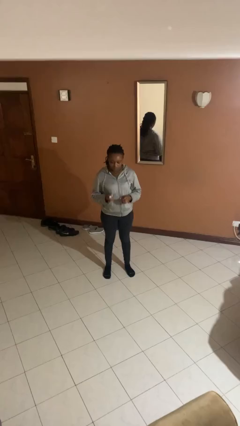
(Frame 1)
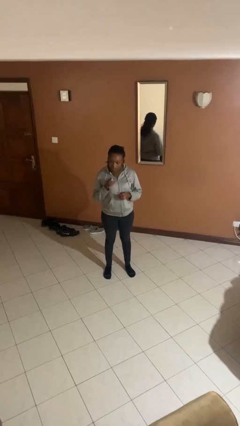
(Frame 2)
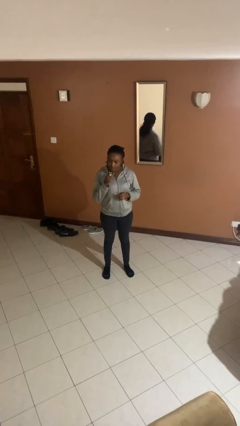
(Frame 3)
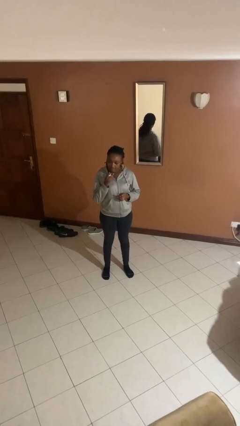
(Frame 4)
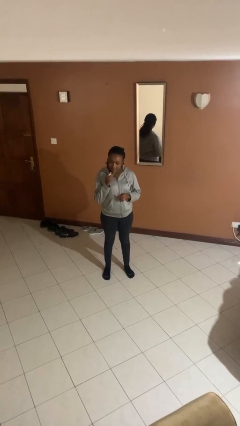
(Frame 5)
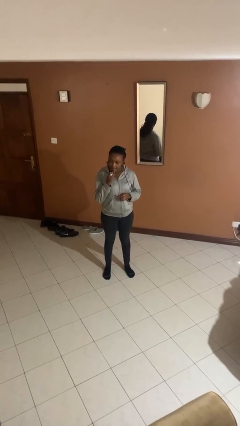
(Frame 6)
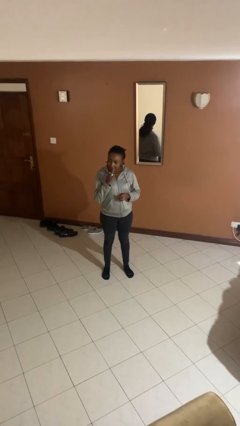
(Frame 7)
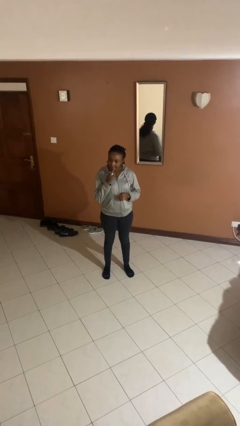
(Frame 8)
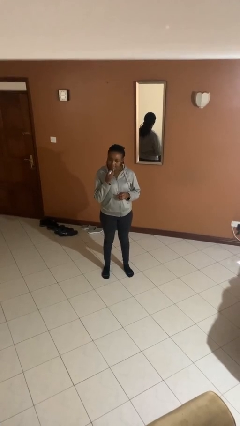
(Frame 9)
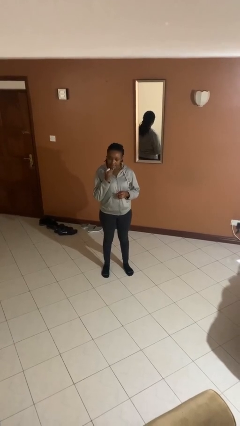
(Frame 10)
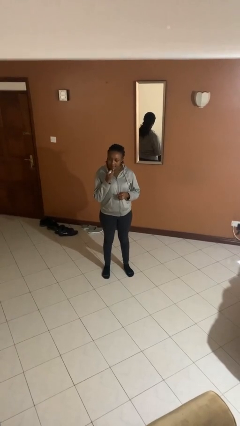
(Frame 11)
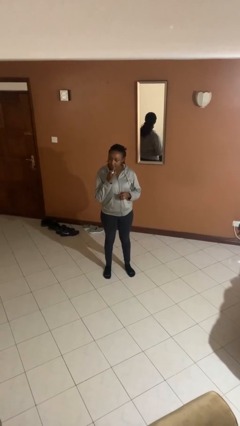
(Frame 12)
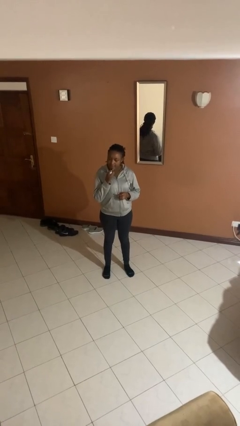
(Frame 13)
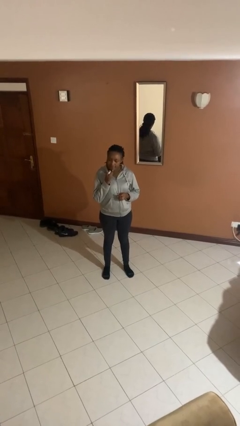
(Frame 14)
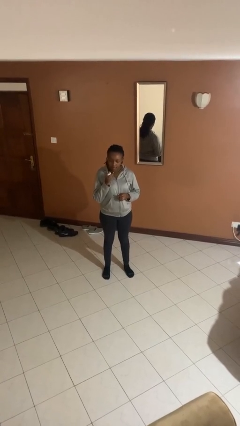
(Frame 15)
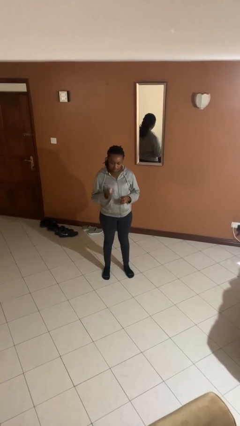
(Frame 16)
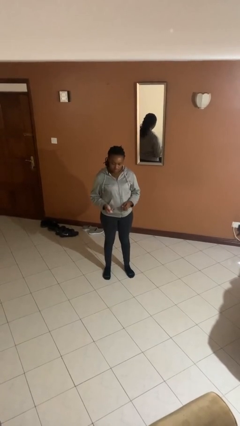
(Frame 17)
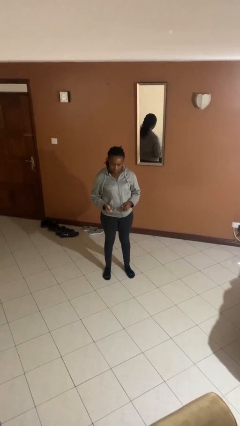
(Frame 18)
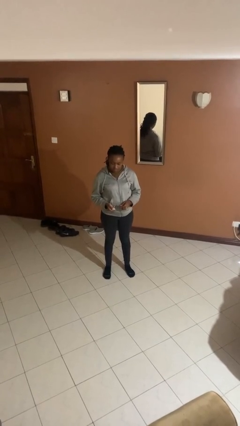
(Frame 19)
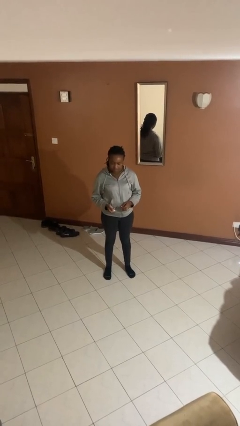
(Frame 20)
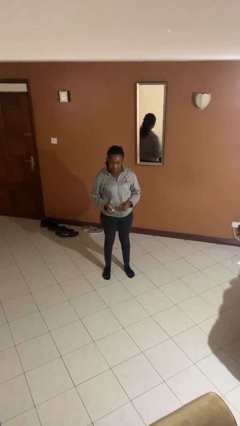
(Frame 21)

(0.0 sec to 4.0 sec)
person applies lip makeup

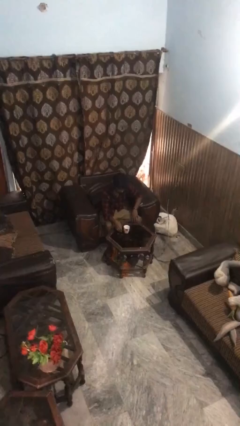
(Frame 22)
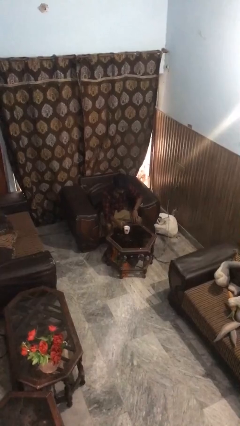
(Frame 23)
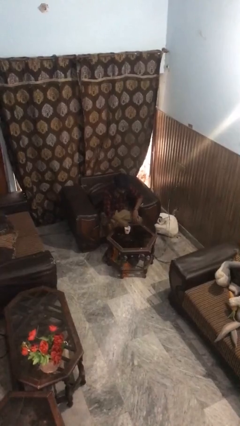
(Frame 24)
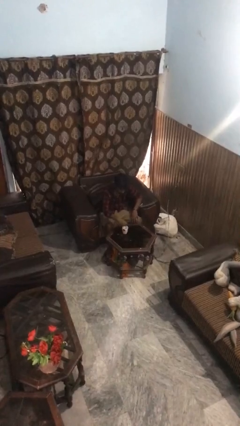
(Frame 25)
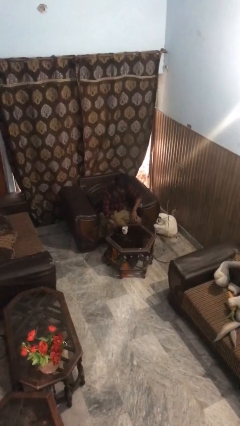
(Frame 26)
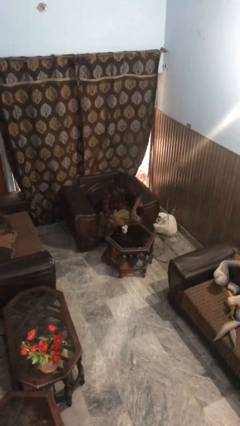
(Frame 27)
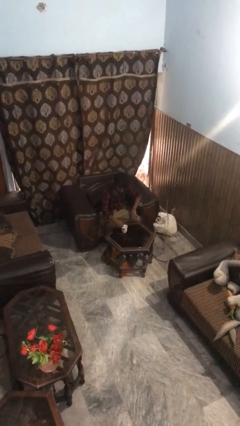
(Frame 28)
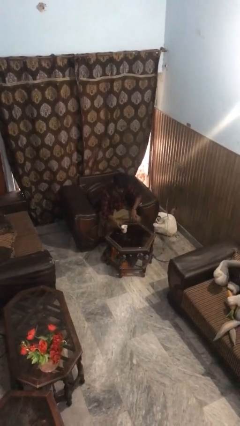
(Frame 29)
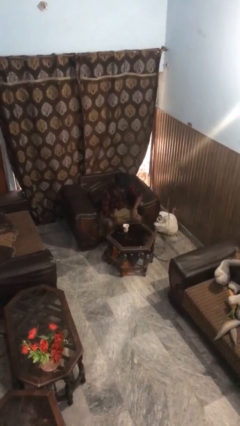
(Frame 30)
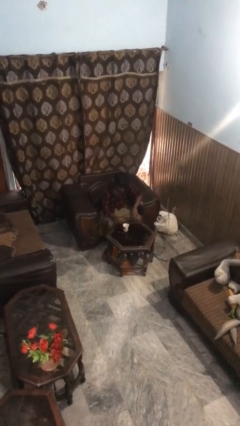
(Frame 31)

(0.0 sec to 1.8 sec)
person stirs mug

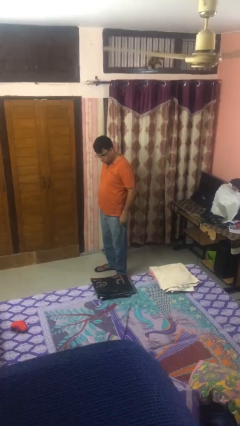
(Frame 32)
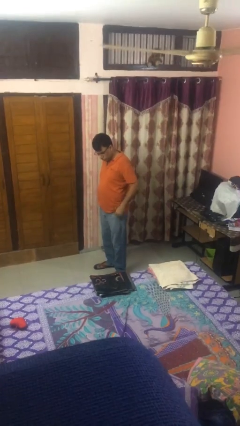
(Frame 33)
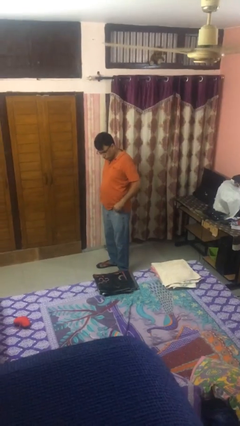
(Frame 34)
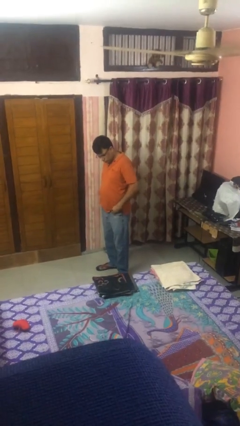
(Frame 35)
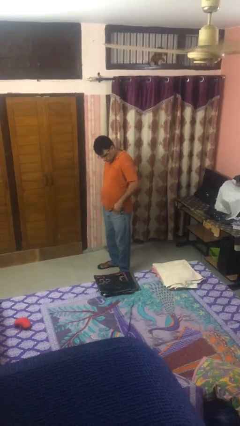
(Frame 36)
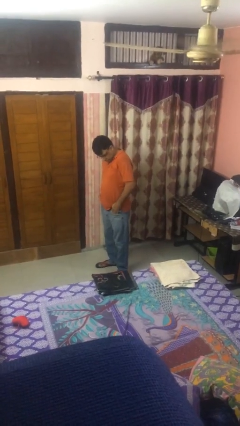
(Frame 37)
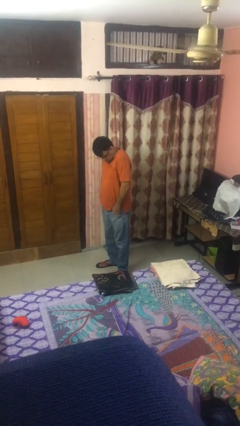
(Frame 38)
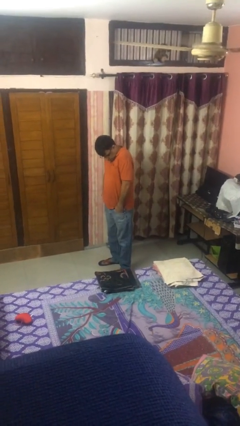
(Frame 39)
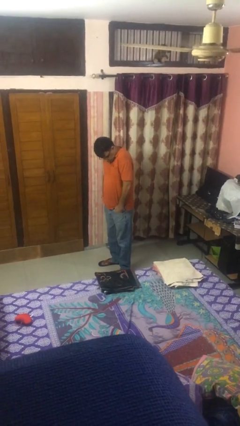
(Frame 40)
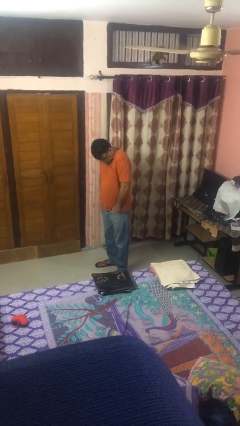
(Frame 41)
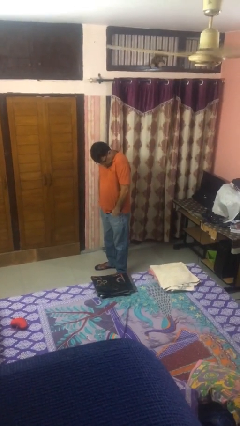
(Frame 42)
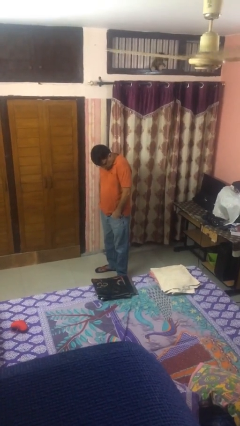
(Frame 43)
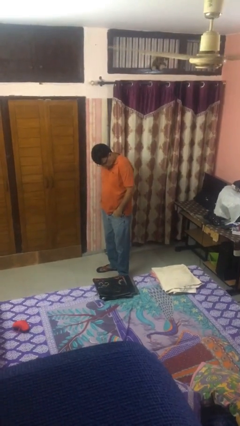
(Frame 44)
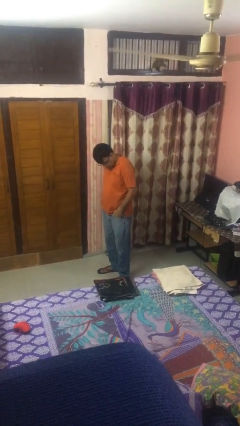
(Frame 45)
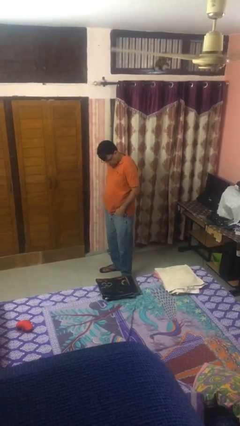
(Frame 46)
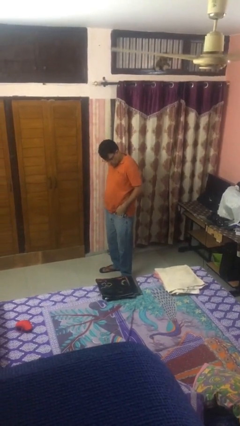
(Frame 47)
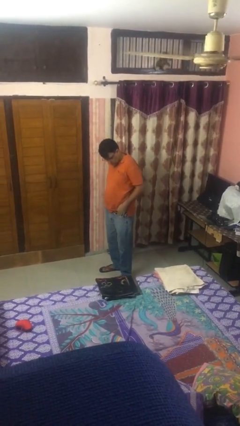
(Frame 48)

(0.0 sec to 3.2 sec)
person puts hands in back pockets

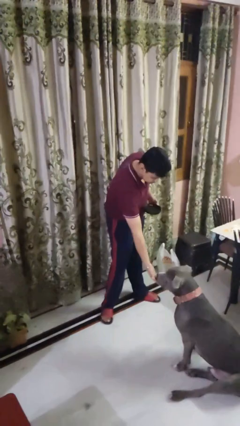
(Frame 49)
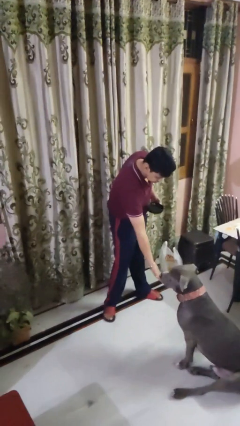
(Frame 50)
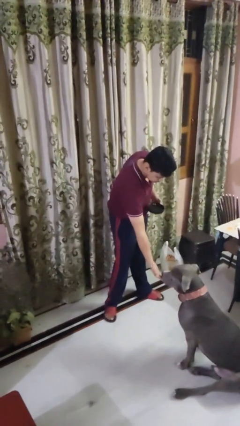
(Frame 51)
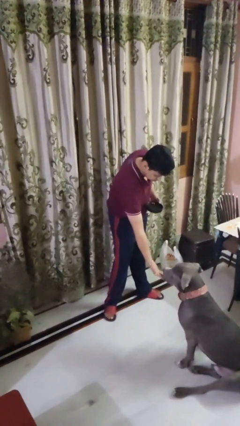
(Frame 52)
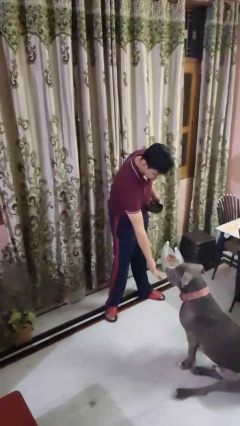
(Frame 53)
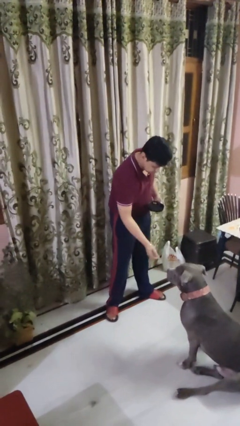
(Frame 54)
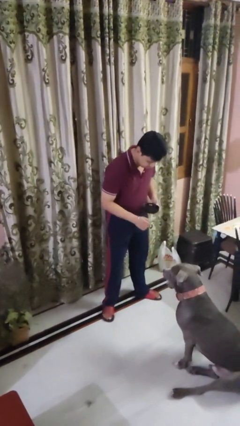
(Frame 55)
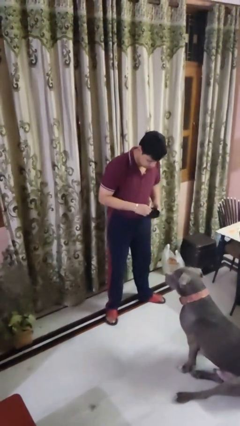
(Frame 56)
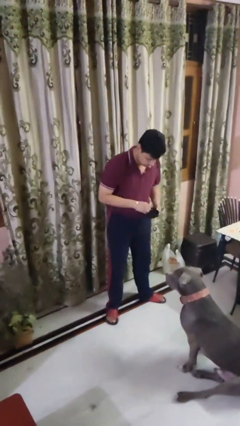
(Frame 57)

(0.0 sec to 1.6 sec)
person feeds dog

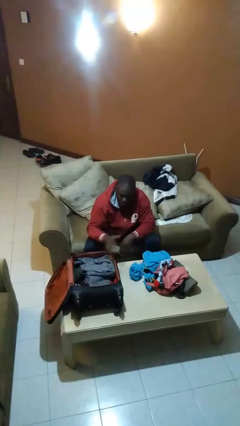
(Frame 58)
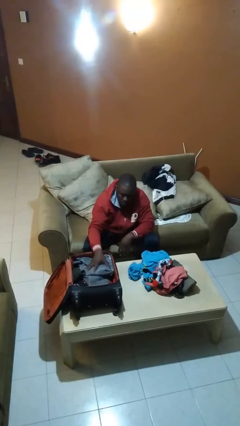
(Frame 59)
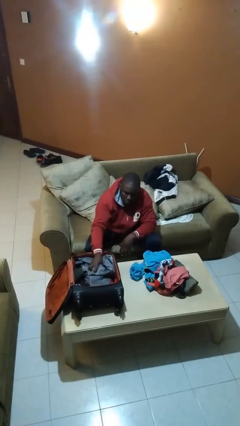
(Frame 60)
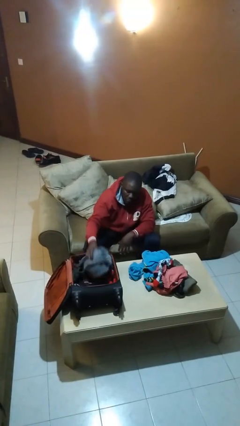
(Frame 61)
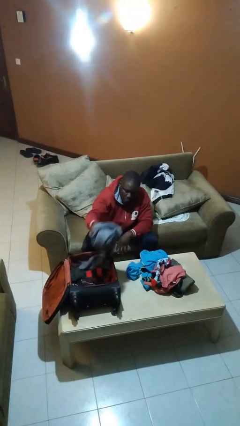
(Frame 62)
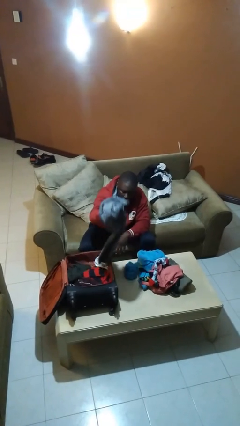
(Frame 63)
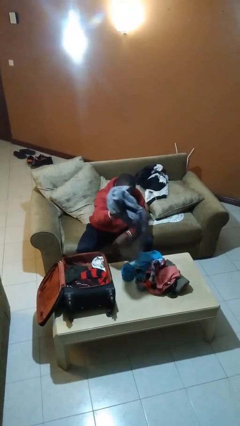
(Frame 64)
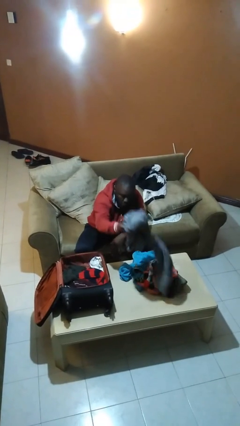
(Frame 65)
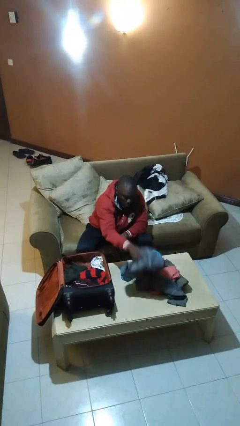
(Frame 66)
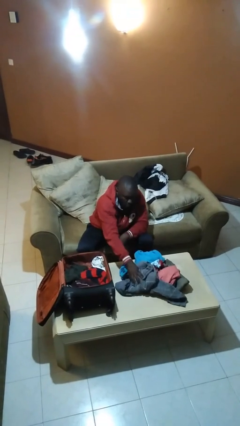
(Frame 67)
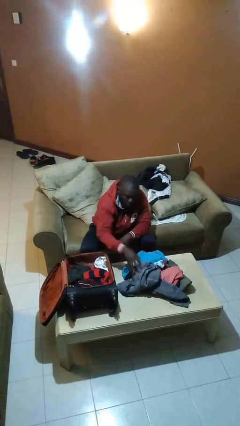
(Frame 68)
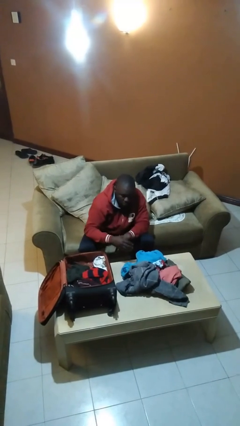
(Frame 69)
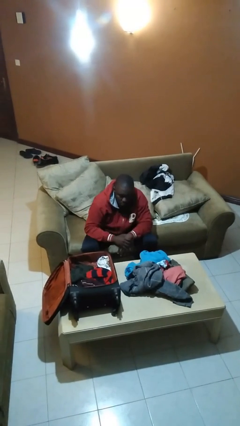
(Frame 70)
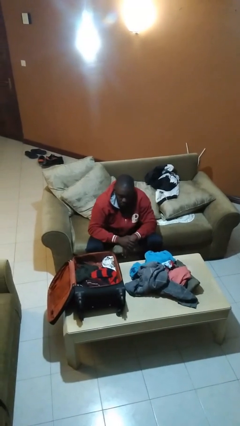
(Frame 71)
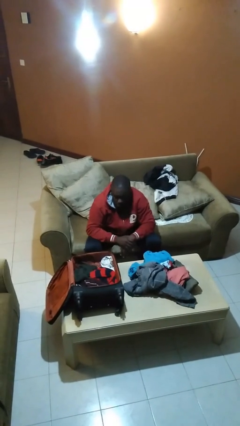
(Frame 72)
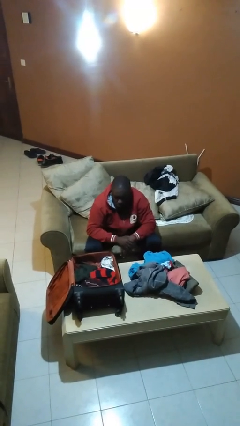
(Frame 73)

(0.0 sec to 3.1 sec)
person unloads clothes from suitcase

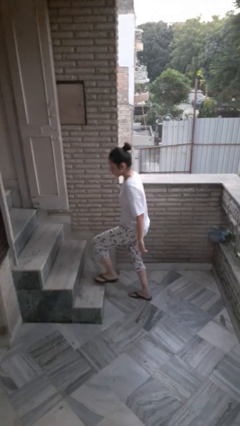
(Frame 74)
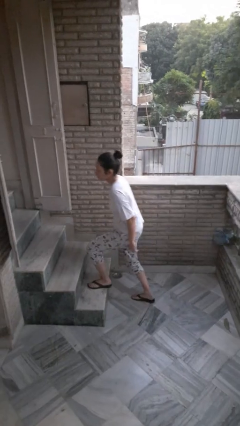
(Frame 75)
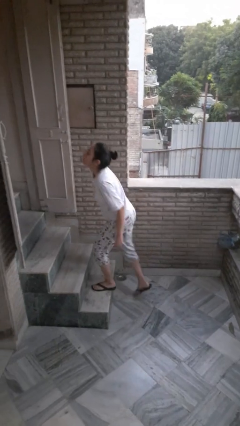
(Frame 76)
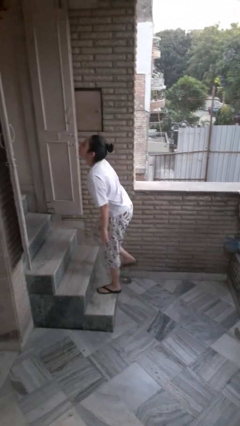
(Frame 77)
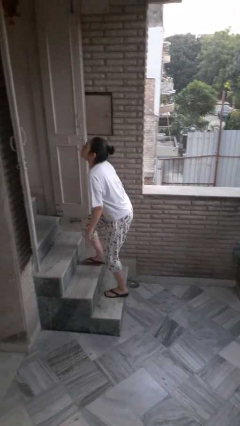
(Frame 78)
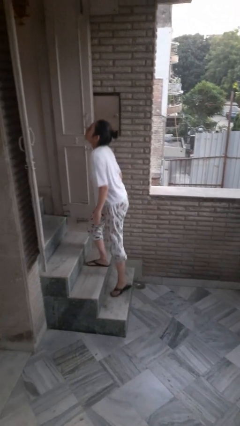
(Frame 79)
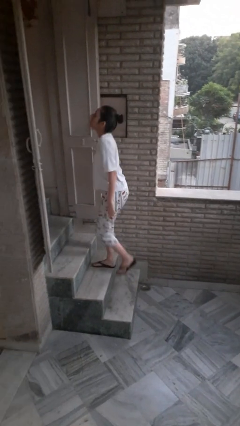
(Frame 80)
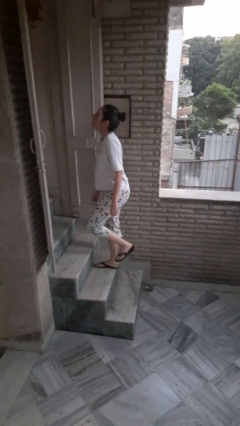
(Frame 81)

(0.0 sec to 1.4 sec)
person climbs up stairs

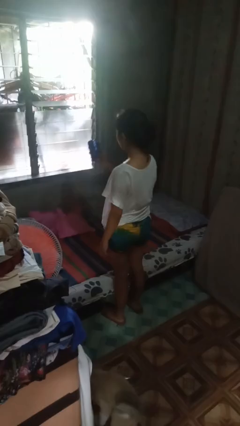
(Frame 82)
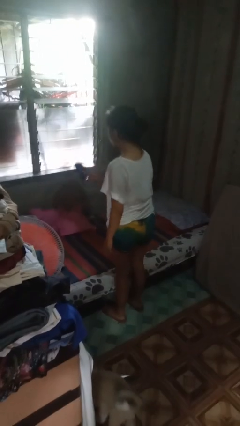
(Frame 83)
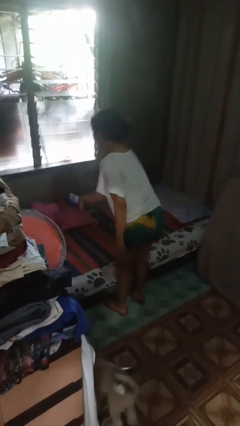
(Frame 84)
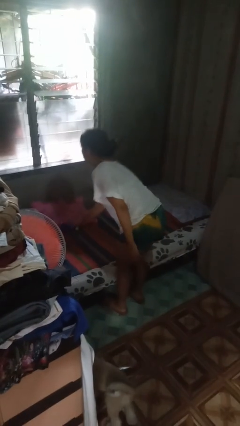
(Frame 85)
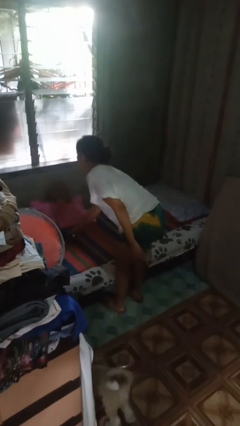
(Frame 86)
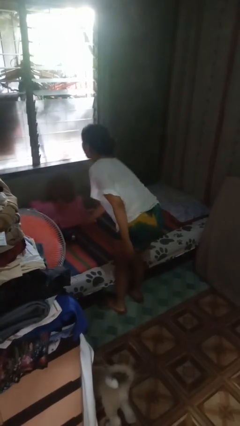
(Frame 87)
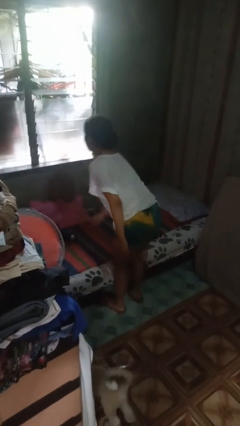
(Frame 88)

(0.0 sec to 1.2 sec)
person puts down object on bed

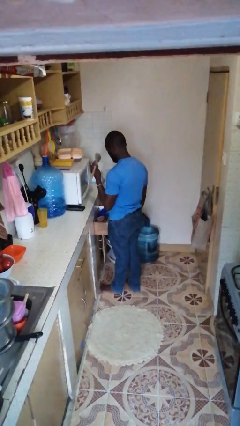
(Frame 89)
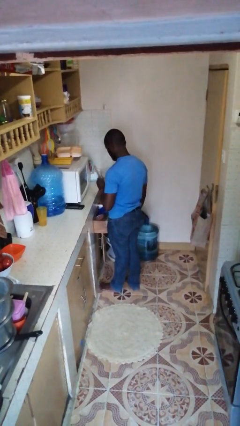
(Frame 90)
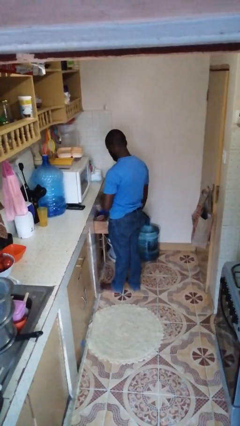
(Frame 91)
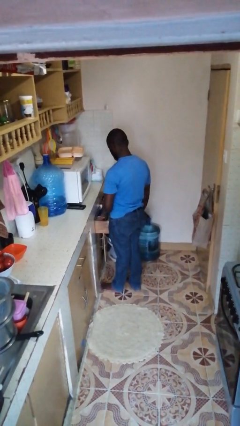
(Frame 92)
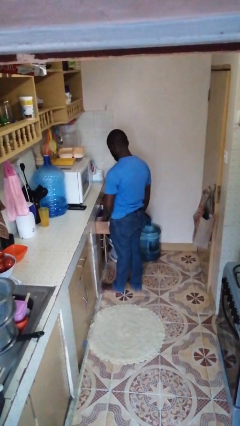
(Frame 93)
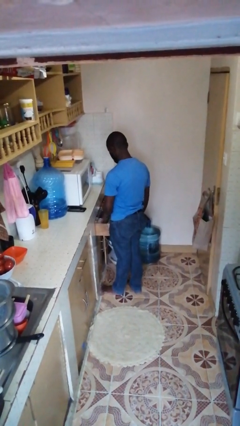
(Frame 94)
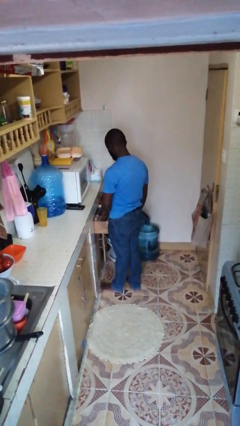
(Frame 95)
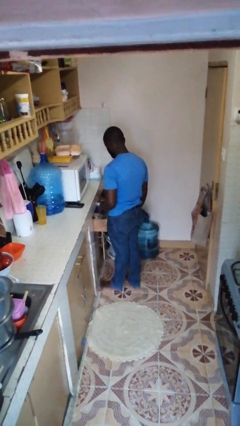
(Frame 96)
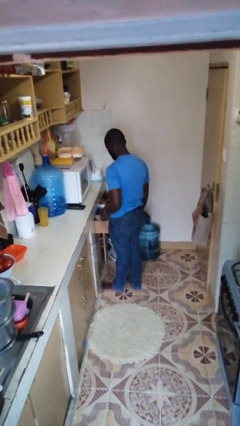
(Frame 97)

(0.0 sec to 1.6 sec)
person puts object into kitchen drawer
